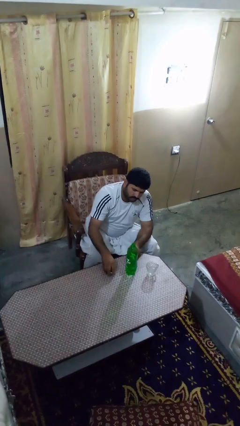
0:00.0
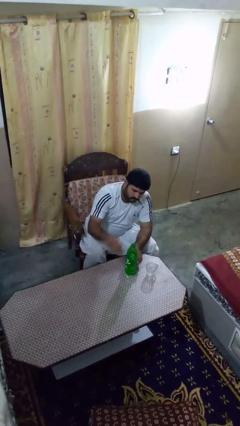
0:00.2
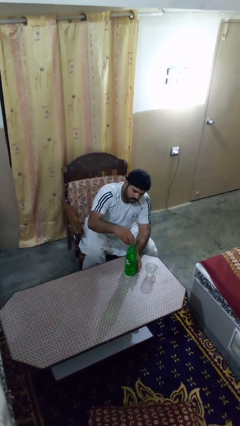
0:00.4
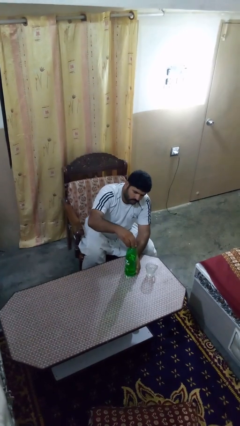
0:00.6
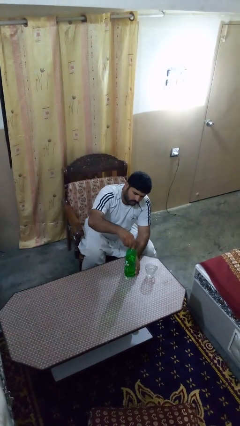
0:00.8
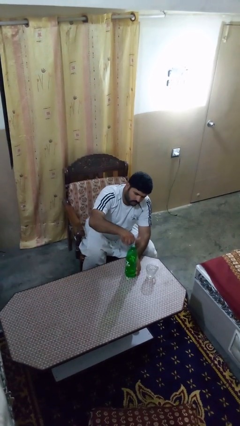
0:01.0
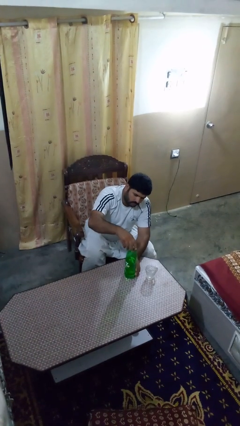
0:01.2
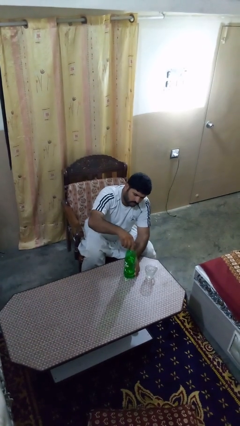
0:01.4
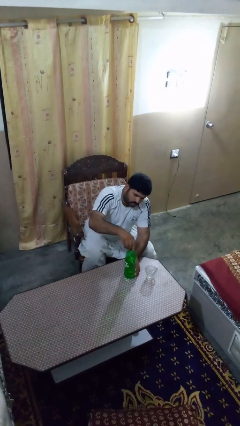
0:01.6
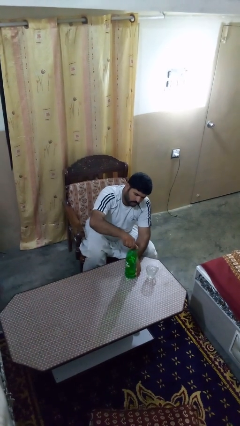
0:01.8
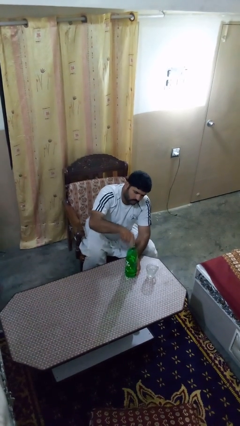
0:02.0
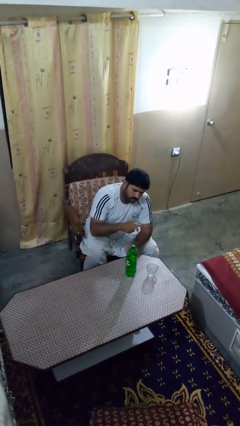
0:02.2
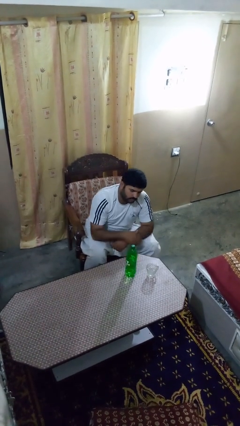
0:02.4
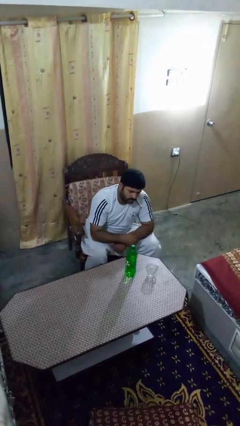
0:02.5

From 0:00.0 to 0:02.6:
person screws lid to bottle

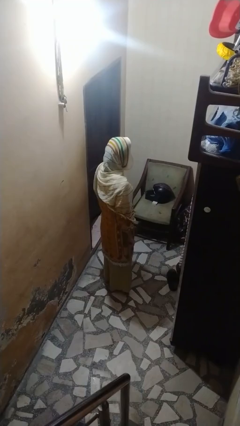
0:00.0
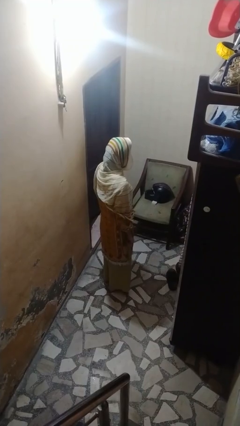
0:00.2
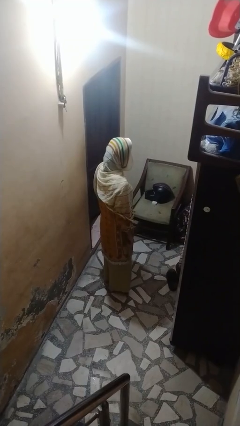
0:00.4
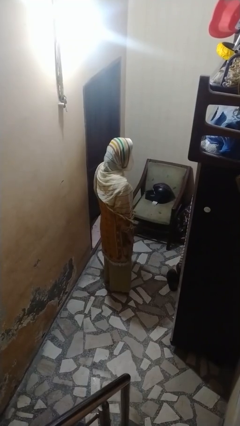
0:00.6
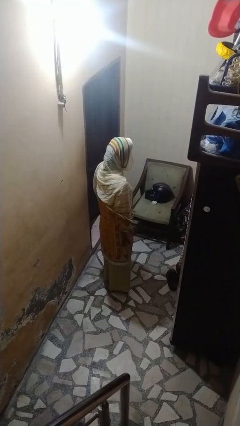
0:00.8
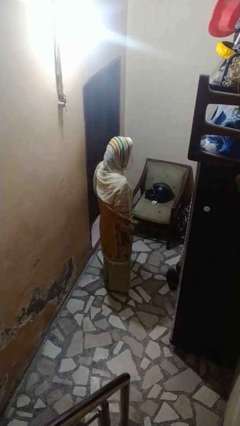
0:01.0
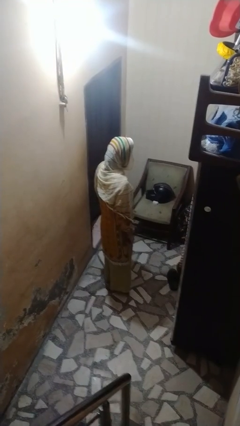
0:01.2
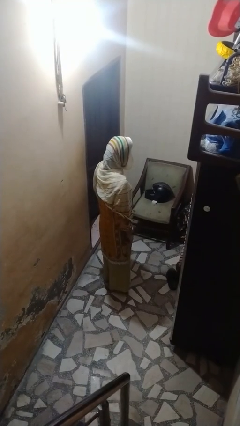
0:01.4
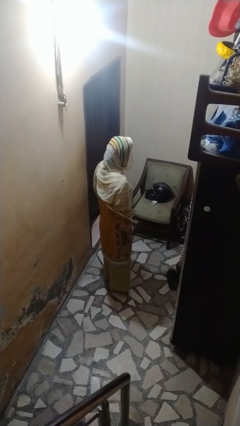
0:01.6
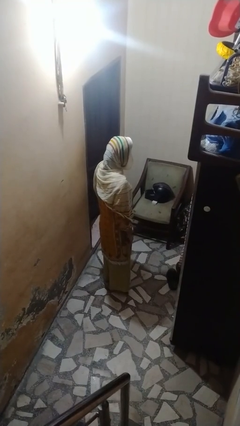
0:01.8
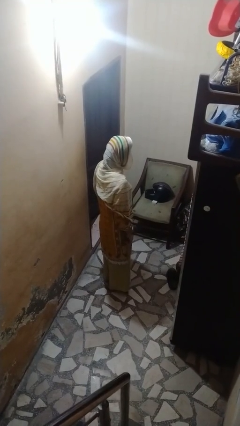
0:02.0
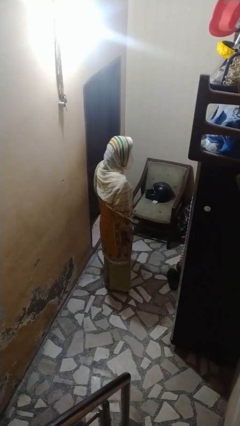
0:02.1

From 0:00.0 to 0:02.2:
person gestures lower hand

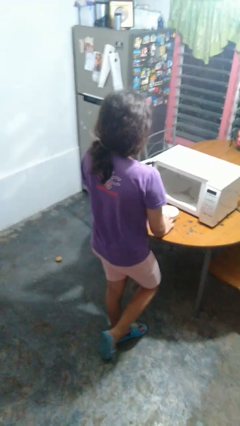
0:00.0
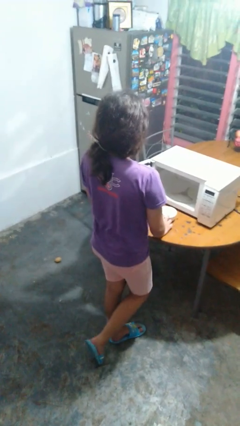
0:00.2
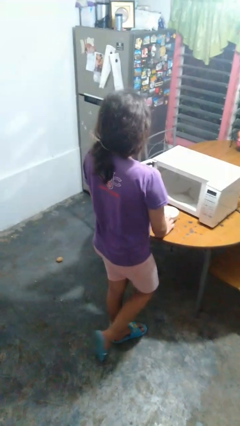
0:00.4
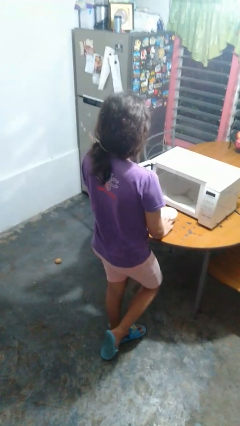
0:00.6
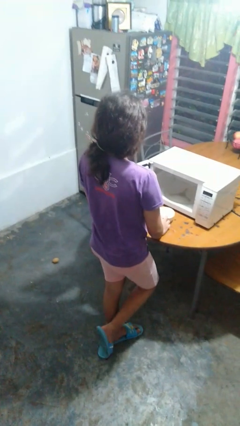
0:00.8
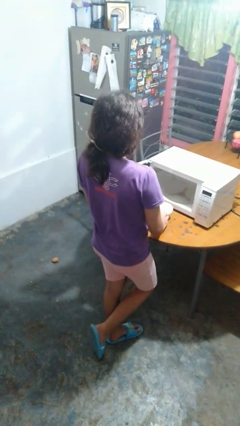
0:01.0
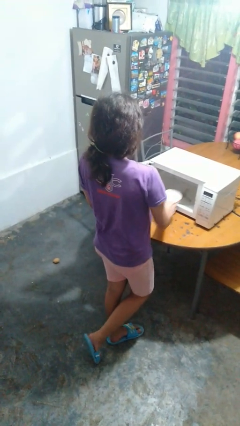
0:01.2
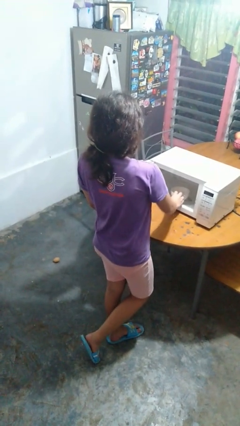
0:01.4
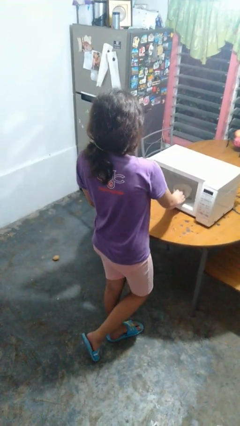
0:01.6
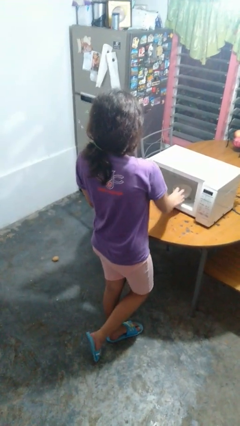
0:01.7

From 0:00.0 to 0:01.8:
person puts object into microwave

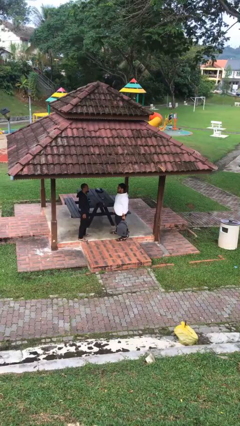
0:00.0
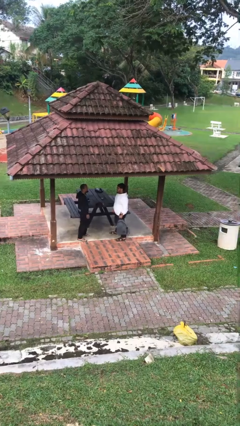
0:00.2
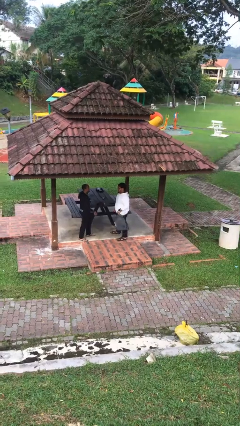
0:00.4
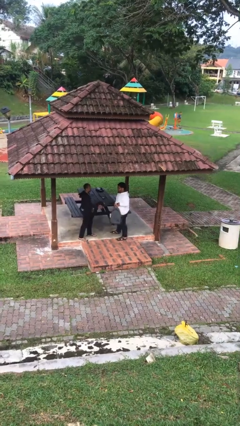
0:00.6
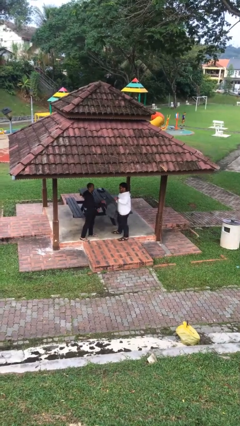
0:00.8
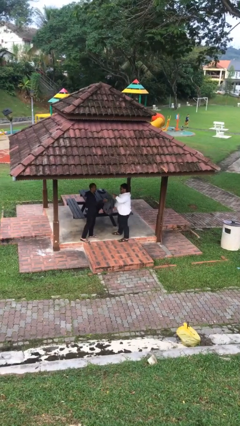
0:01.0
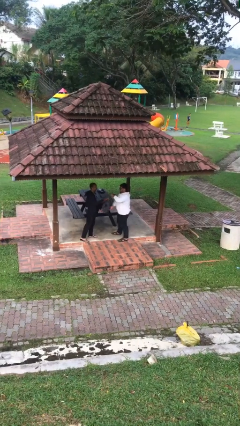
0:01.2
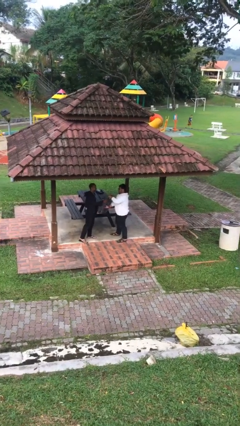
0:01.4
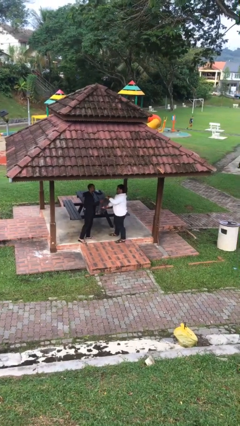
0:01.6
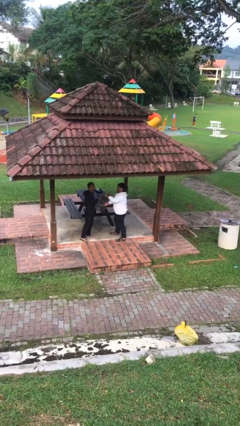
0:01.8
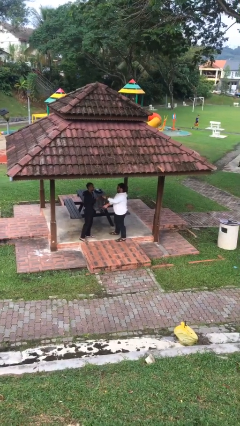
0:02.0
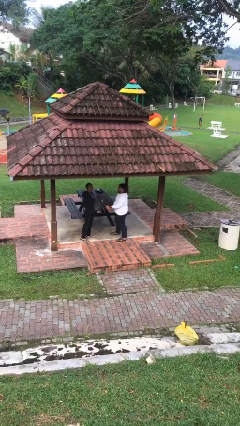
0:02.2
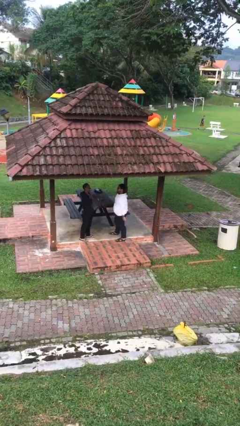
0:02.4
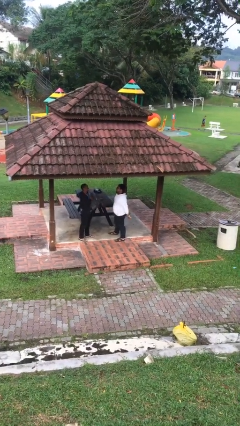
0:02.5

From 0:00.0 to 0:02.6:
person transfers object to person

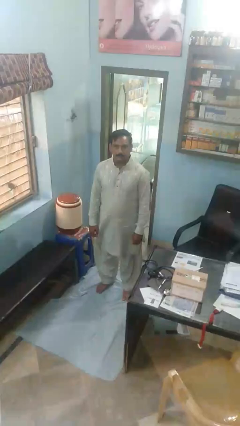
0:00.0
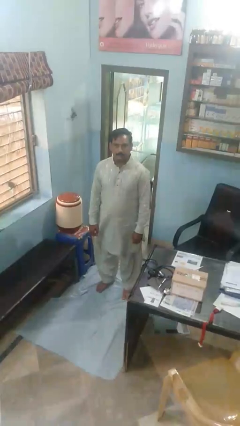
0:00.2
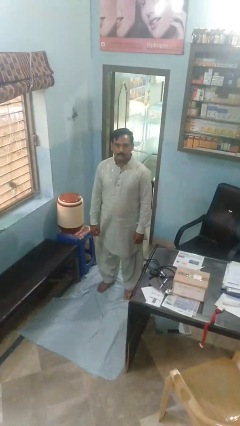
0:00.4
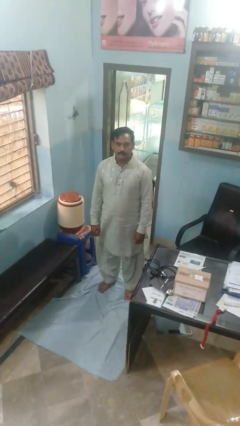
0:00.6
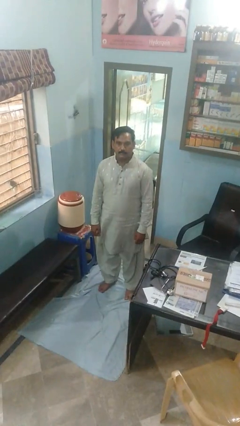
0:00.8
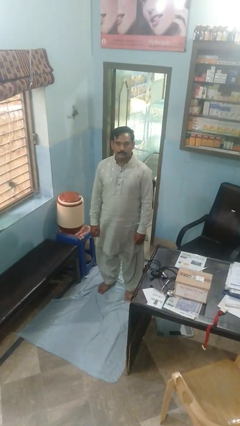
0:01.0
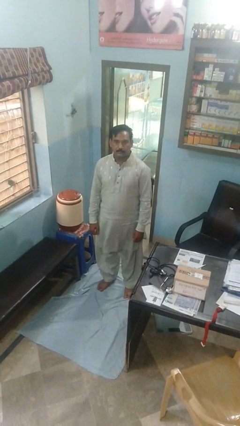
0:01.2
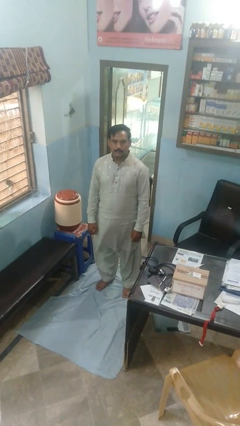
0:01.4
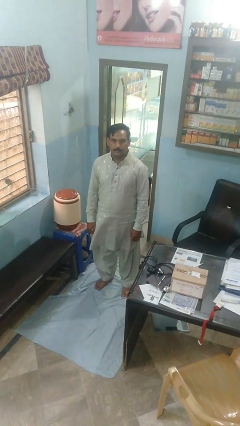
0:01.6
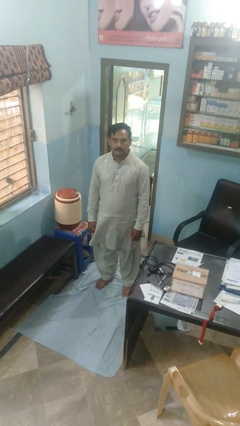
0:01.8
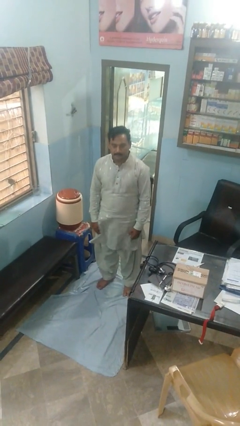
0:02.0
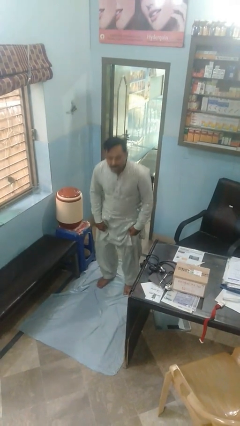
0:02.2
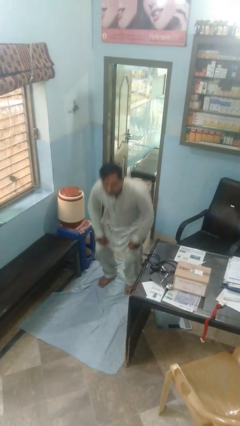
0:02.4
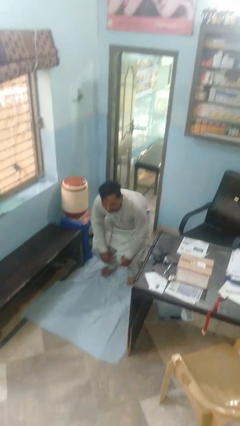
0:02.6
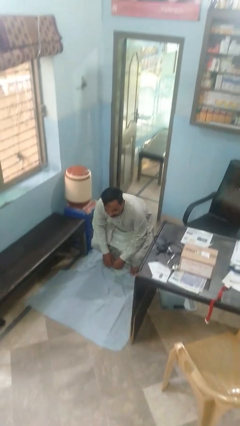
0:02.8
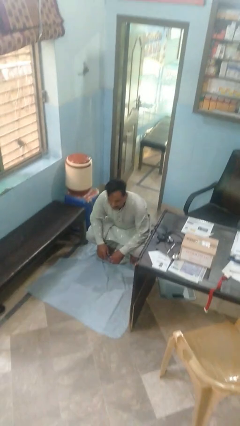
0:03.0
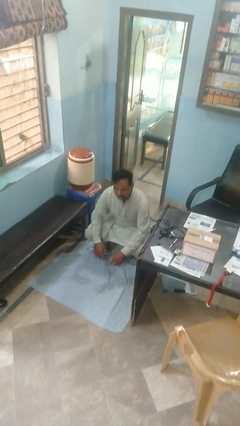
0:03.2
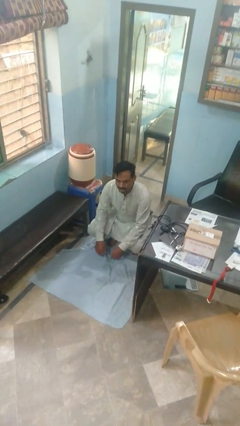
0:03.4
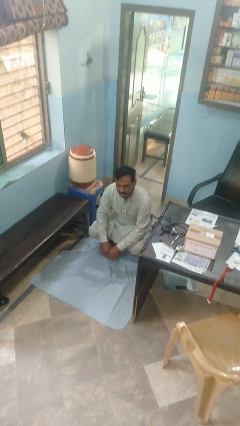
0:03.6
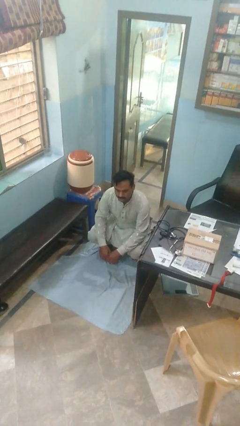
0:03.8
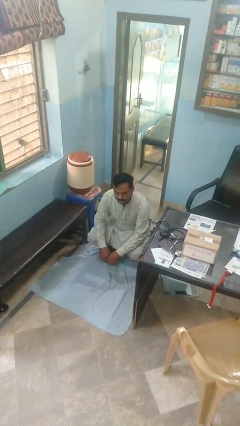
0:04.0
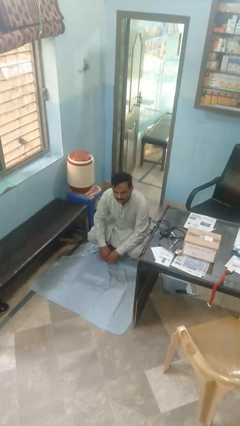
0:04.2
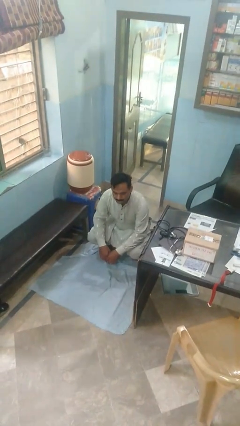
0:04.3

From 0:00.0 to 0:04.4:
person squats

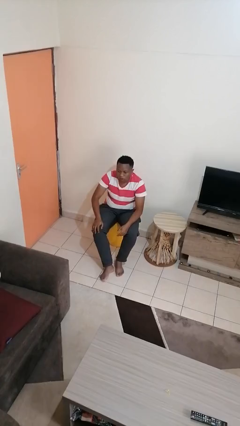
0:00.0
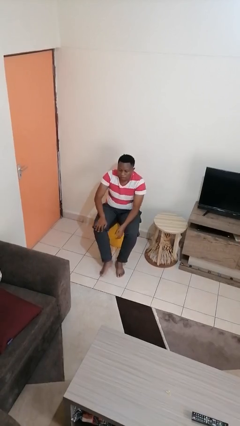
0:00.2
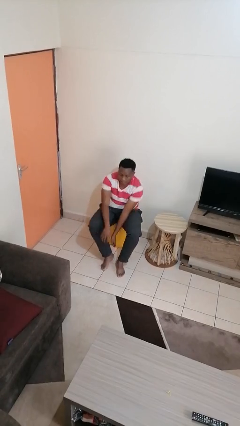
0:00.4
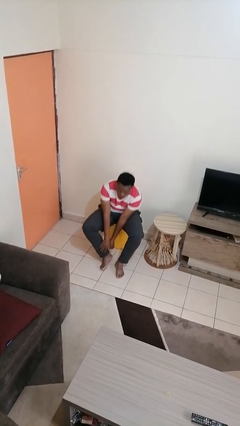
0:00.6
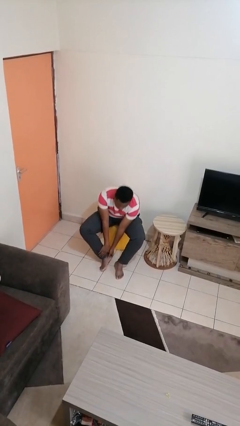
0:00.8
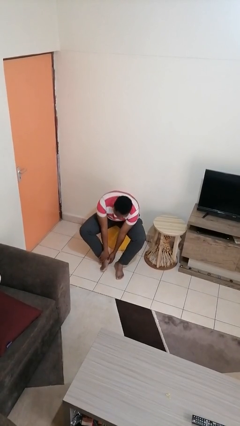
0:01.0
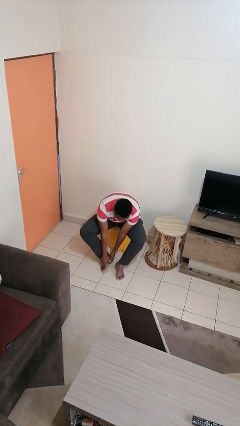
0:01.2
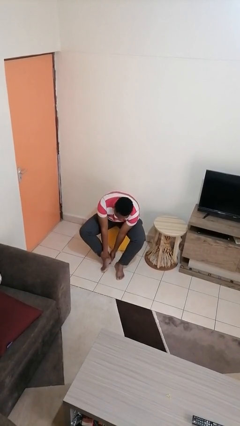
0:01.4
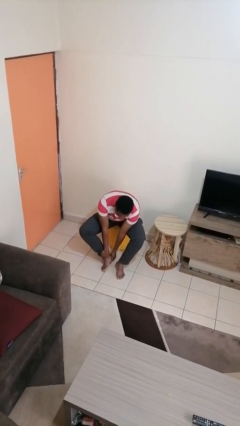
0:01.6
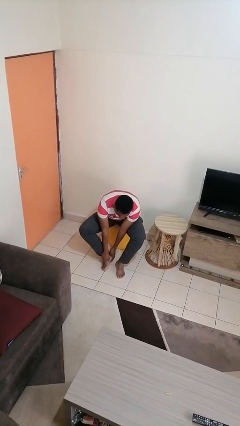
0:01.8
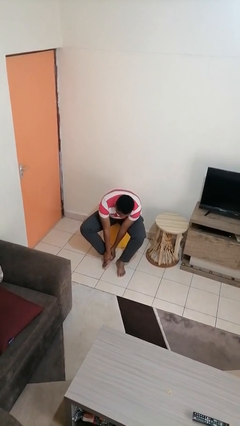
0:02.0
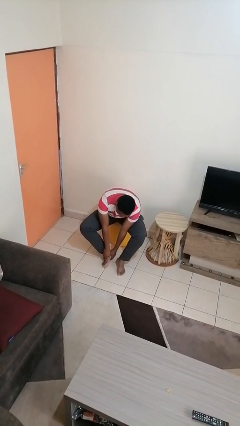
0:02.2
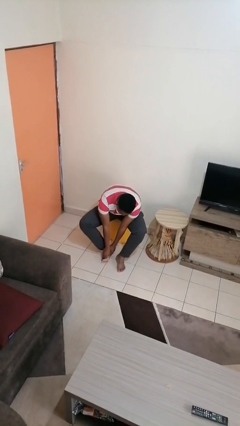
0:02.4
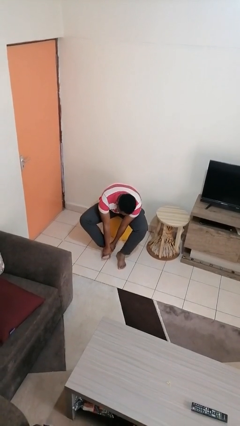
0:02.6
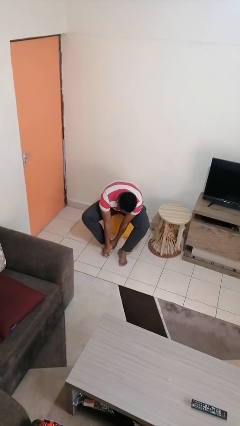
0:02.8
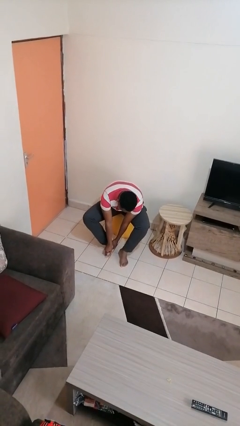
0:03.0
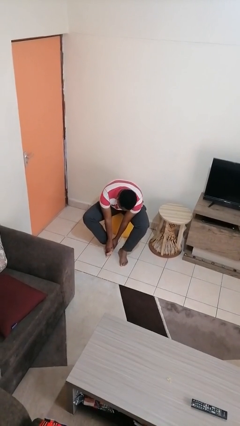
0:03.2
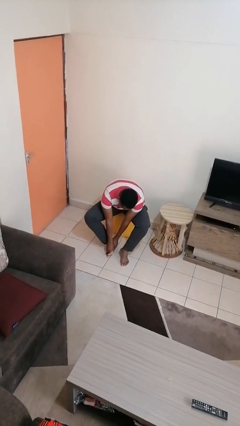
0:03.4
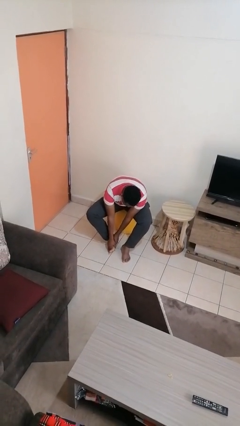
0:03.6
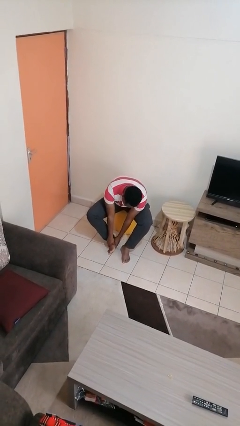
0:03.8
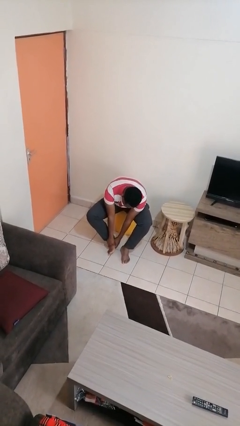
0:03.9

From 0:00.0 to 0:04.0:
person rubs foot
